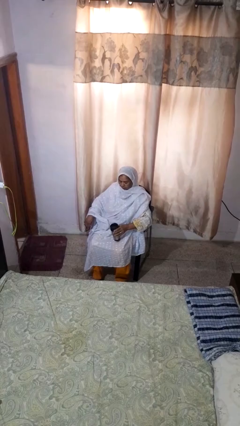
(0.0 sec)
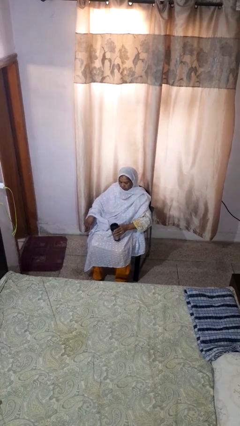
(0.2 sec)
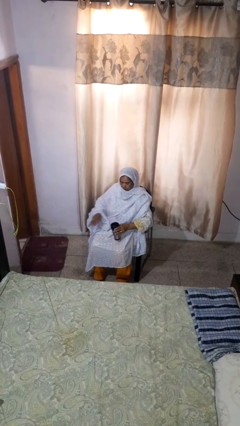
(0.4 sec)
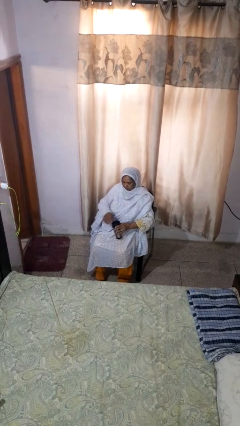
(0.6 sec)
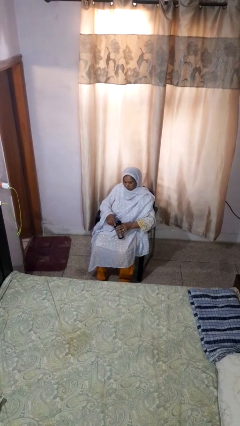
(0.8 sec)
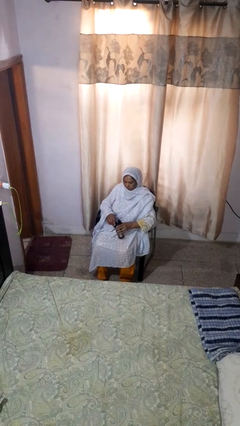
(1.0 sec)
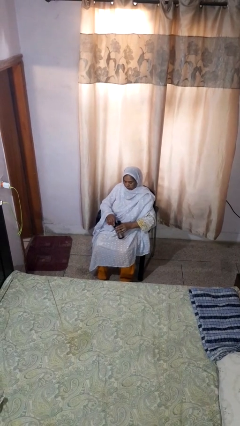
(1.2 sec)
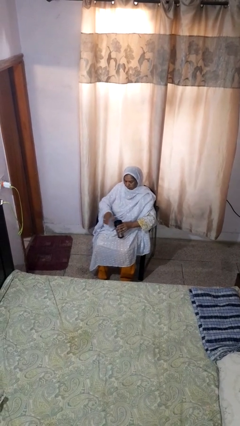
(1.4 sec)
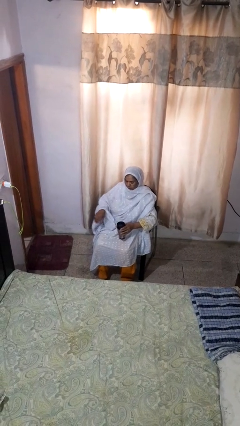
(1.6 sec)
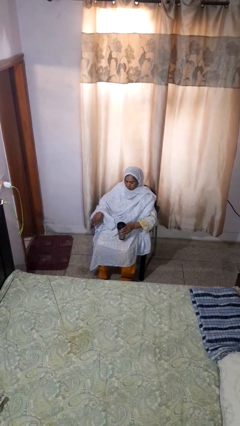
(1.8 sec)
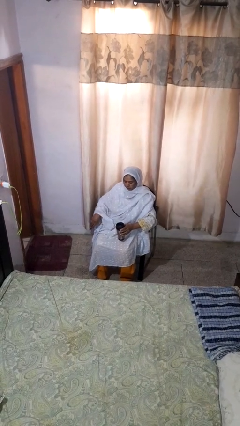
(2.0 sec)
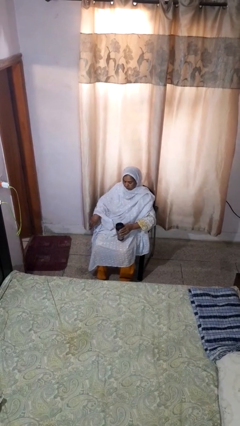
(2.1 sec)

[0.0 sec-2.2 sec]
person opens beverage can

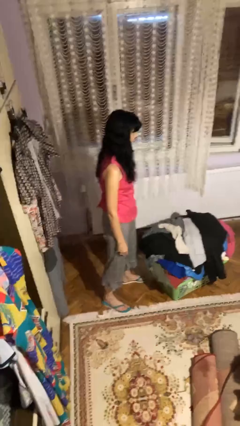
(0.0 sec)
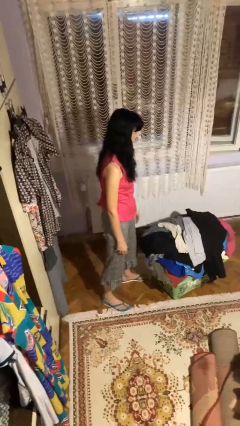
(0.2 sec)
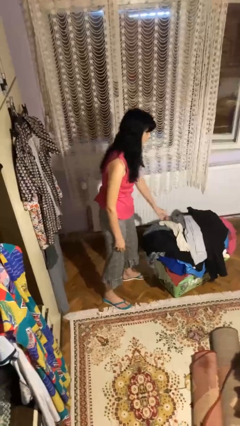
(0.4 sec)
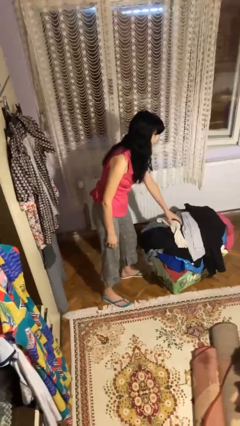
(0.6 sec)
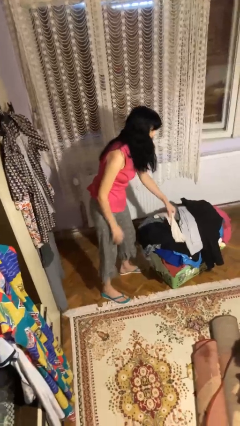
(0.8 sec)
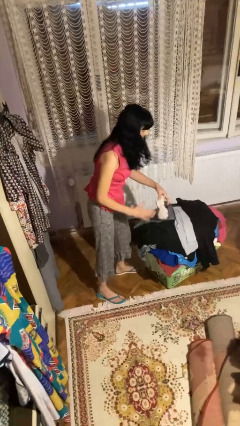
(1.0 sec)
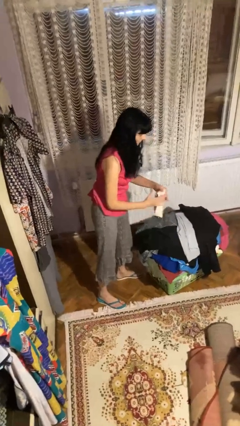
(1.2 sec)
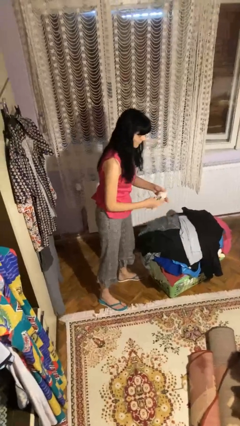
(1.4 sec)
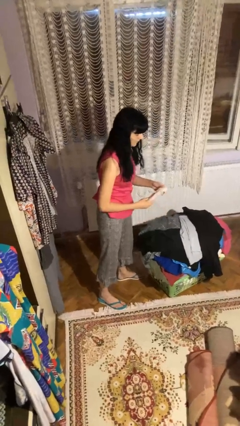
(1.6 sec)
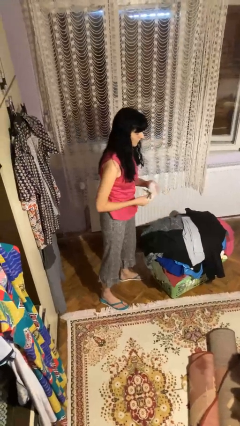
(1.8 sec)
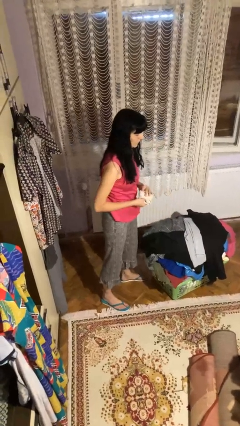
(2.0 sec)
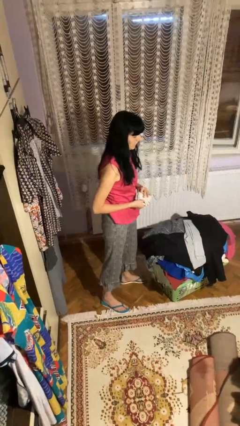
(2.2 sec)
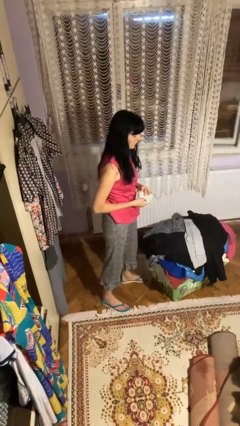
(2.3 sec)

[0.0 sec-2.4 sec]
person folds socks

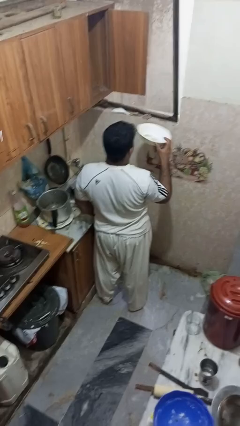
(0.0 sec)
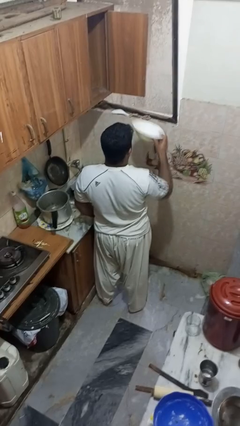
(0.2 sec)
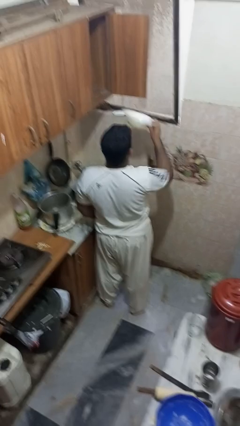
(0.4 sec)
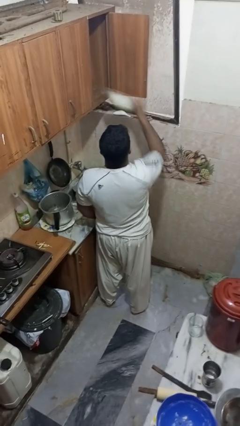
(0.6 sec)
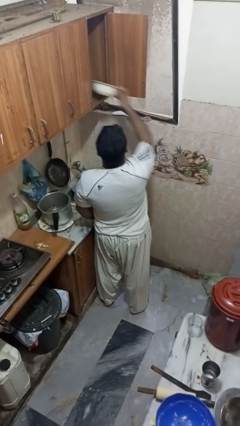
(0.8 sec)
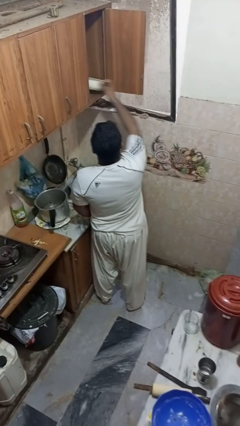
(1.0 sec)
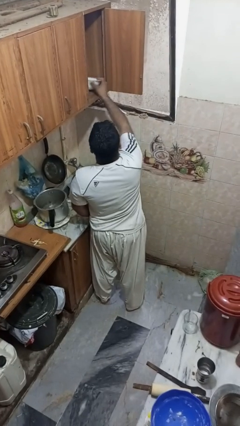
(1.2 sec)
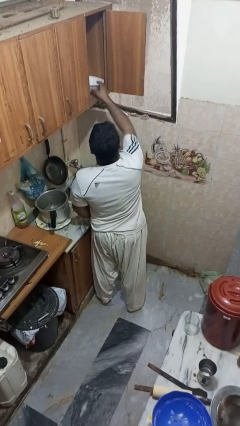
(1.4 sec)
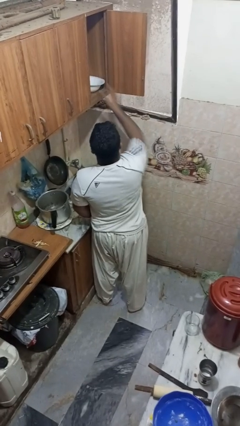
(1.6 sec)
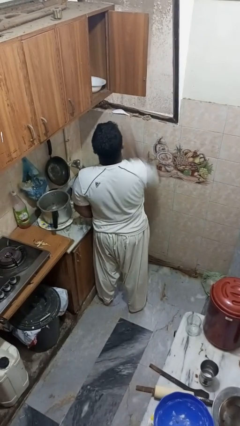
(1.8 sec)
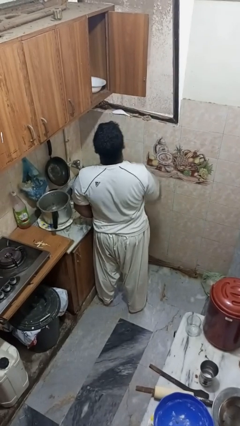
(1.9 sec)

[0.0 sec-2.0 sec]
person puts object in cabinet

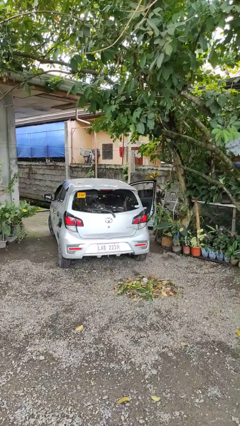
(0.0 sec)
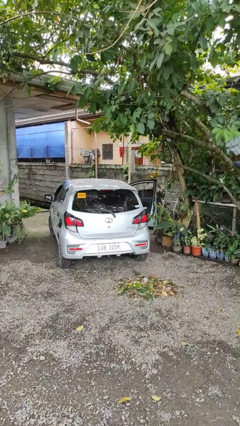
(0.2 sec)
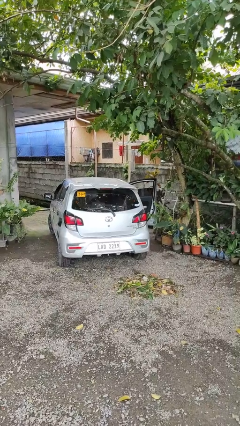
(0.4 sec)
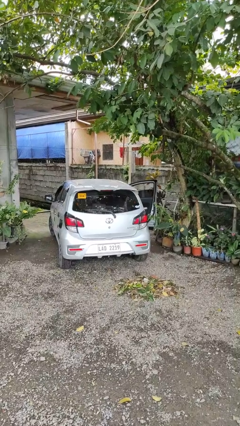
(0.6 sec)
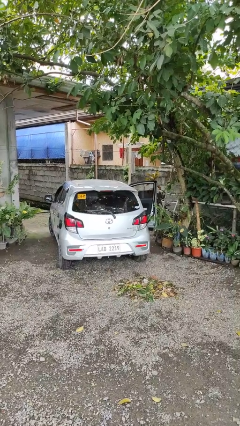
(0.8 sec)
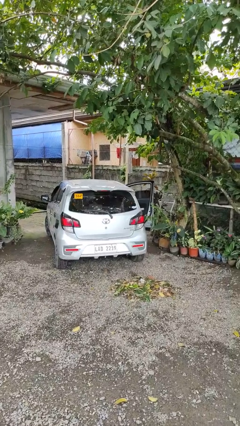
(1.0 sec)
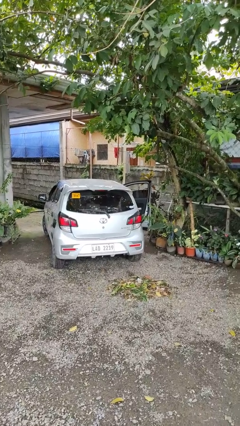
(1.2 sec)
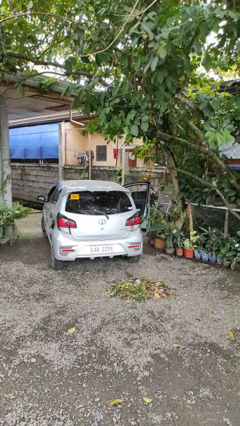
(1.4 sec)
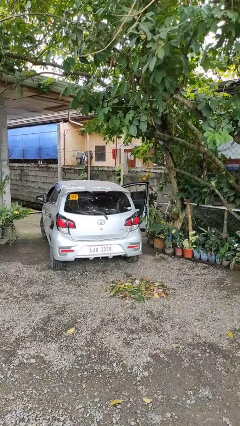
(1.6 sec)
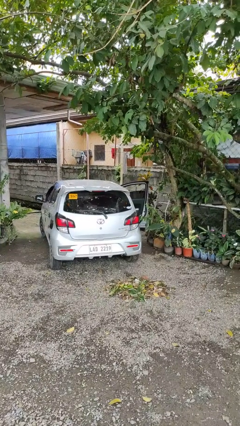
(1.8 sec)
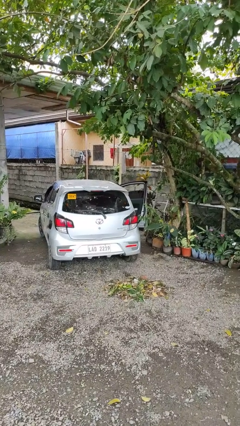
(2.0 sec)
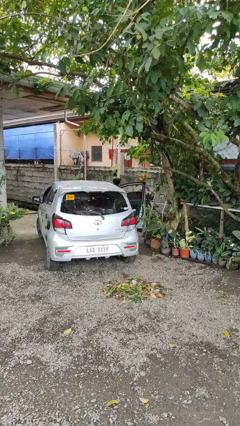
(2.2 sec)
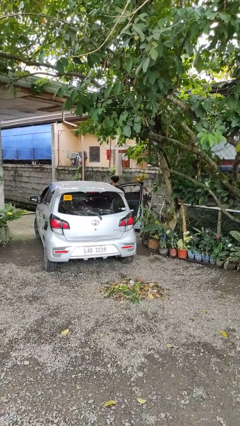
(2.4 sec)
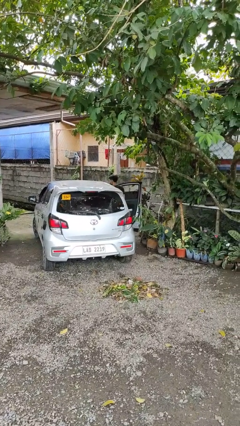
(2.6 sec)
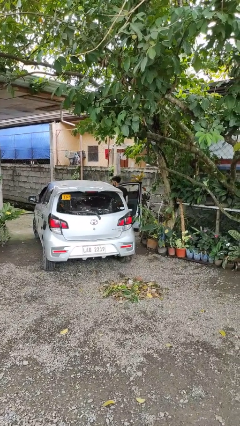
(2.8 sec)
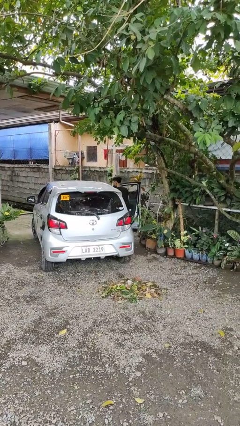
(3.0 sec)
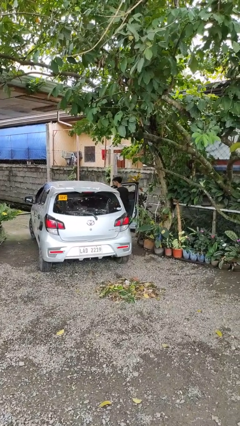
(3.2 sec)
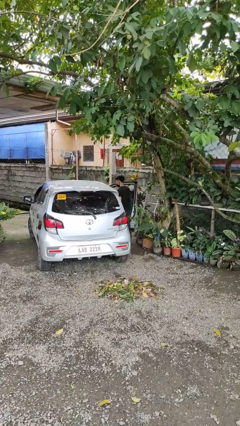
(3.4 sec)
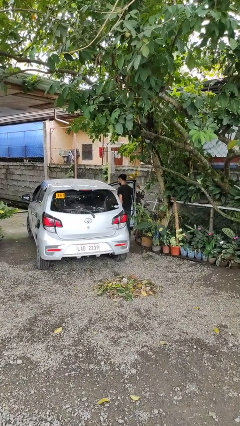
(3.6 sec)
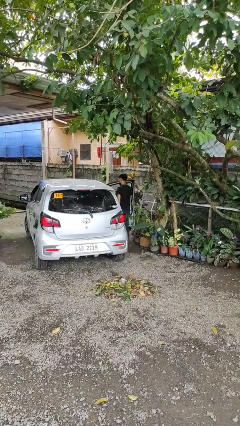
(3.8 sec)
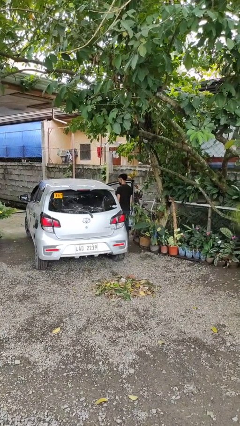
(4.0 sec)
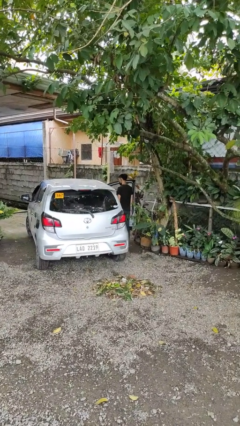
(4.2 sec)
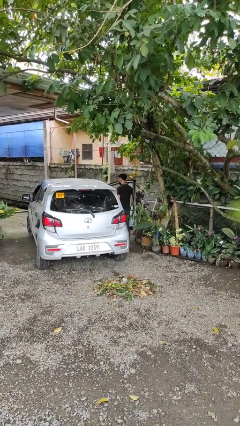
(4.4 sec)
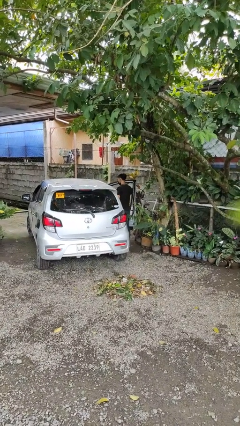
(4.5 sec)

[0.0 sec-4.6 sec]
person exits car

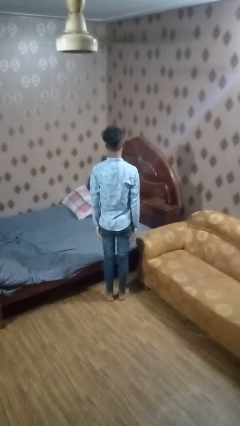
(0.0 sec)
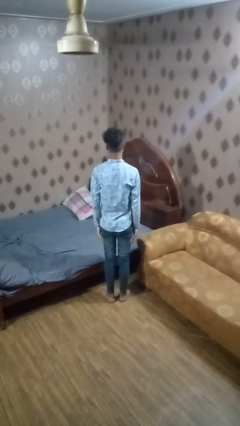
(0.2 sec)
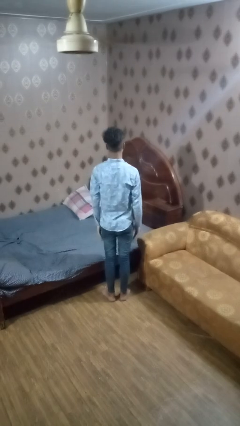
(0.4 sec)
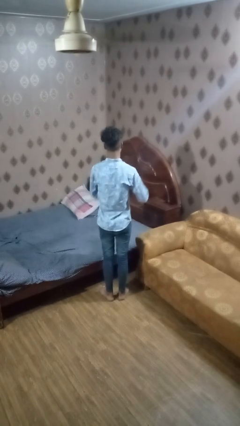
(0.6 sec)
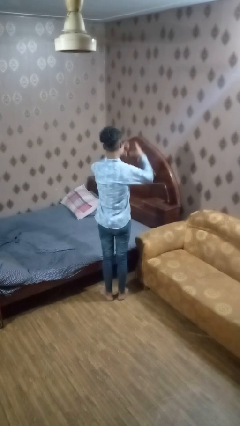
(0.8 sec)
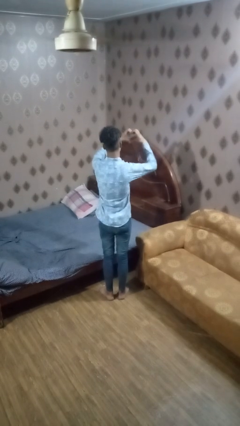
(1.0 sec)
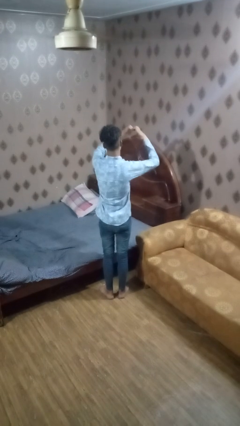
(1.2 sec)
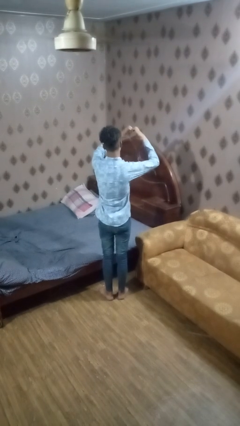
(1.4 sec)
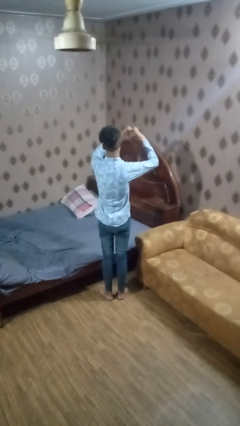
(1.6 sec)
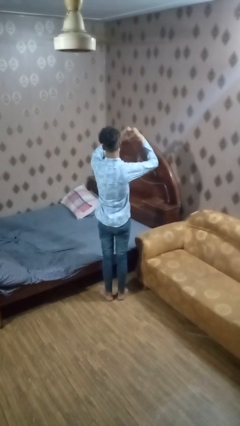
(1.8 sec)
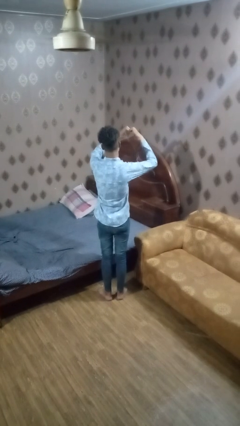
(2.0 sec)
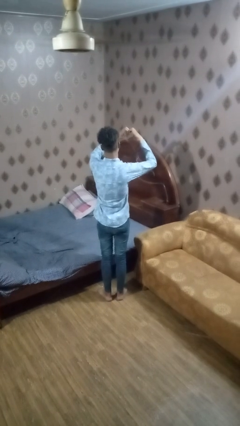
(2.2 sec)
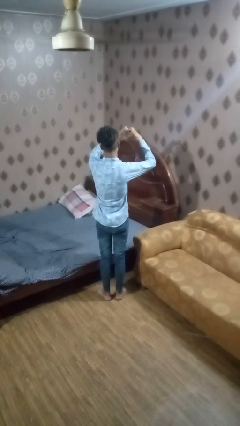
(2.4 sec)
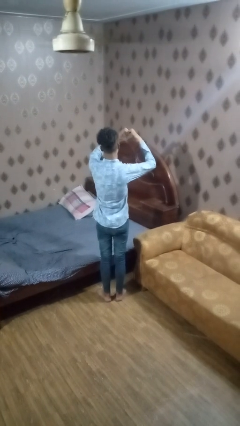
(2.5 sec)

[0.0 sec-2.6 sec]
person gestures heart

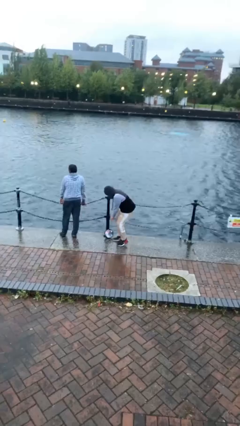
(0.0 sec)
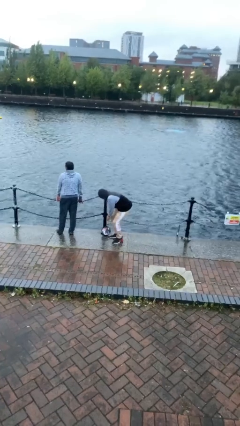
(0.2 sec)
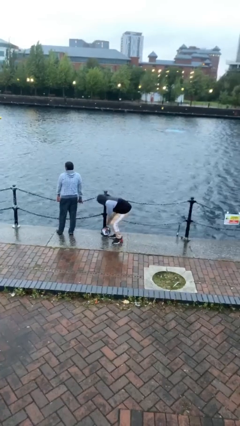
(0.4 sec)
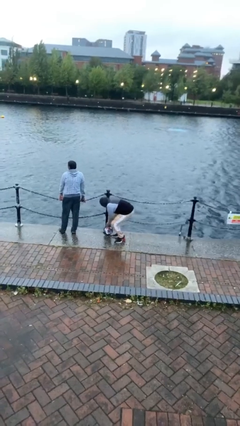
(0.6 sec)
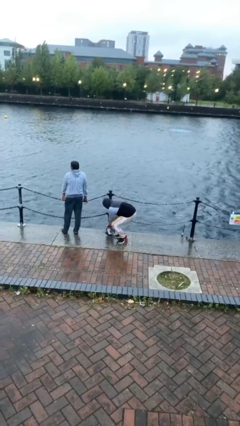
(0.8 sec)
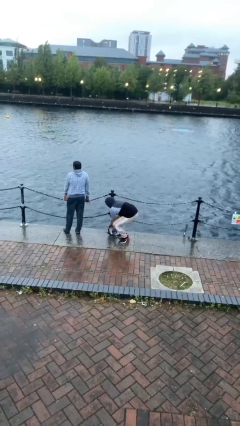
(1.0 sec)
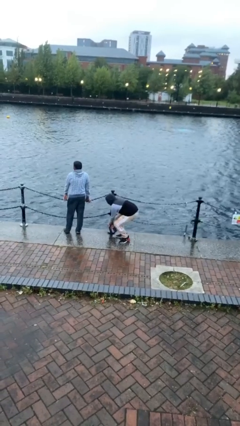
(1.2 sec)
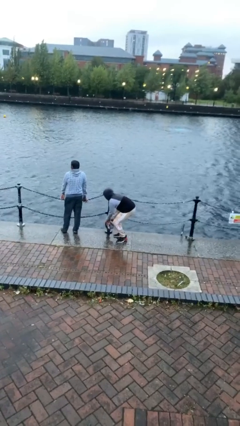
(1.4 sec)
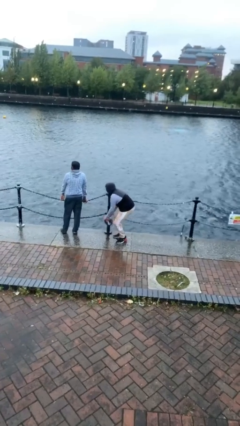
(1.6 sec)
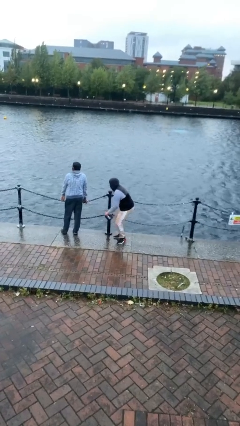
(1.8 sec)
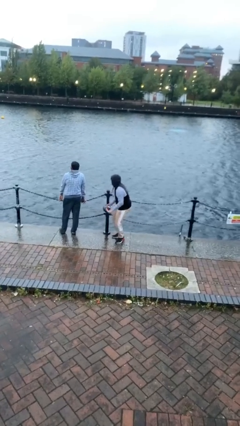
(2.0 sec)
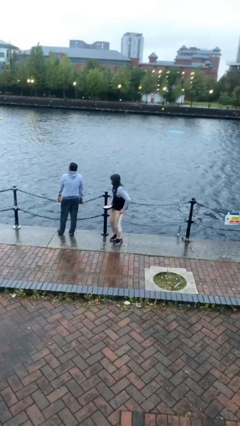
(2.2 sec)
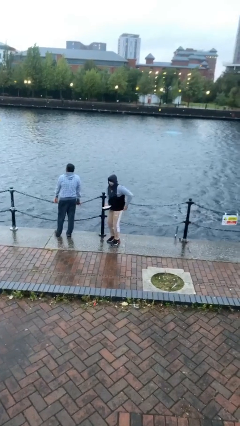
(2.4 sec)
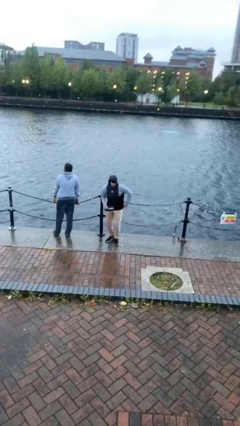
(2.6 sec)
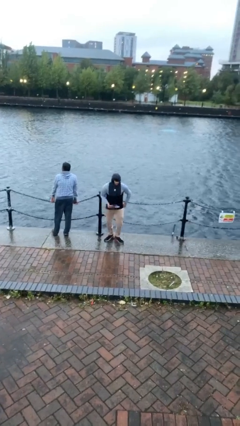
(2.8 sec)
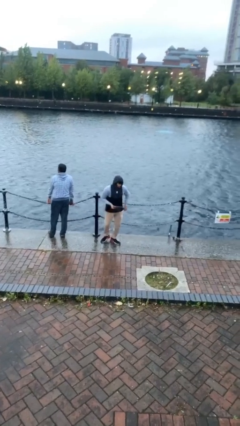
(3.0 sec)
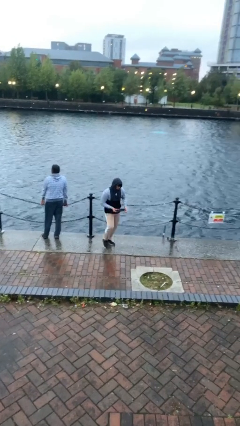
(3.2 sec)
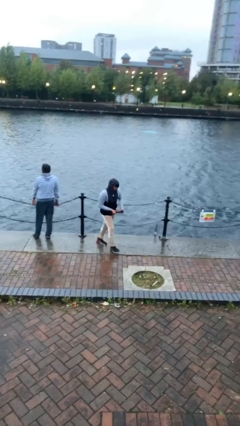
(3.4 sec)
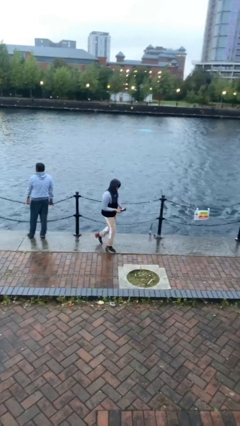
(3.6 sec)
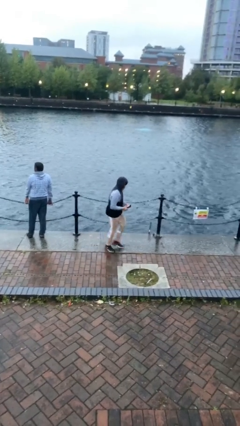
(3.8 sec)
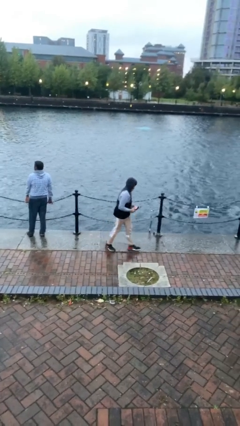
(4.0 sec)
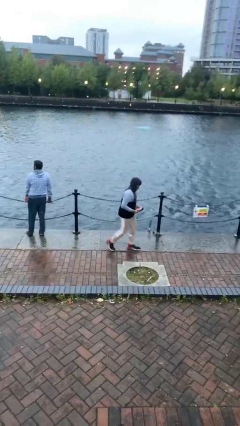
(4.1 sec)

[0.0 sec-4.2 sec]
person steals object from person
